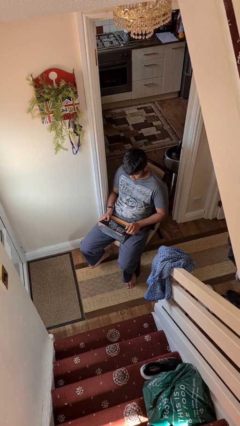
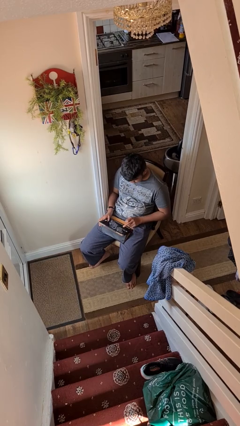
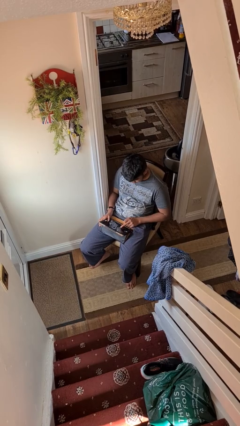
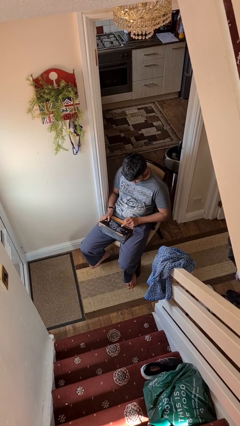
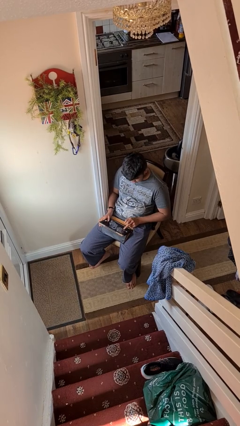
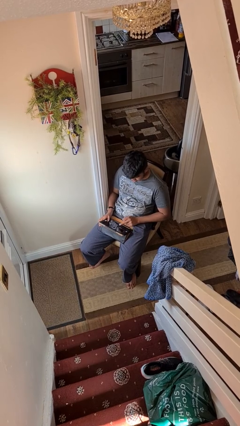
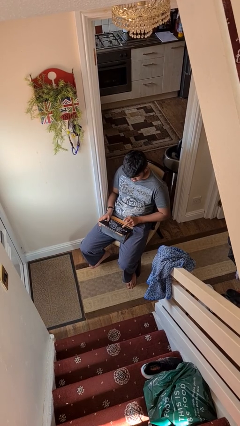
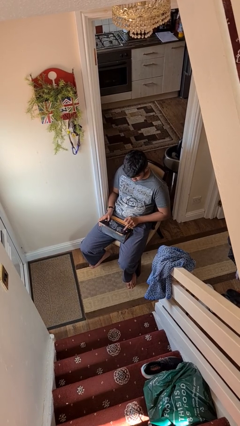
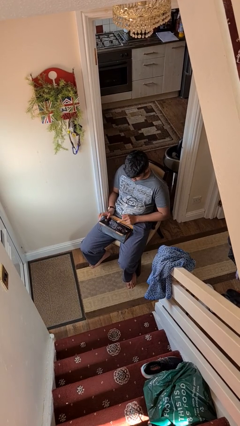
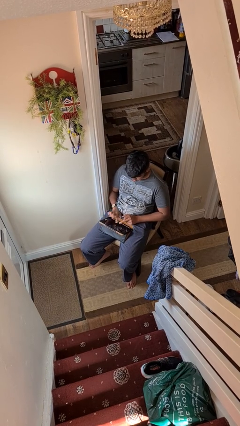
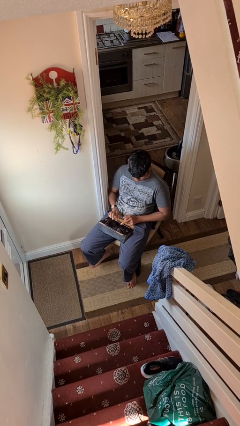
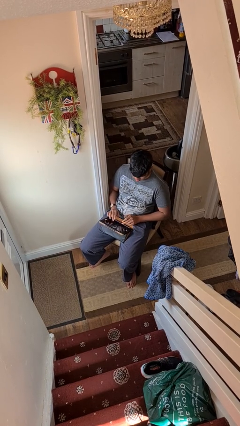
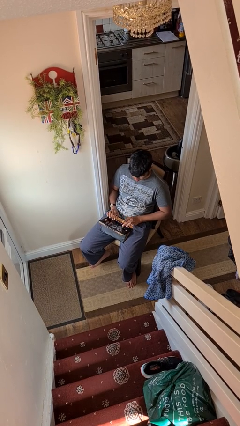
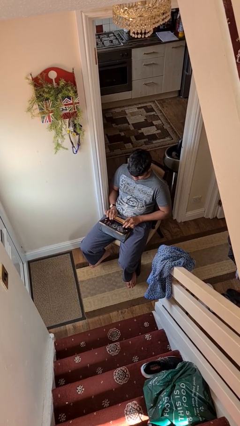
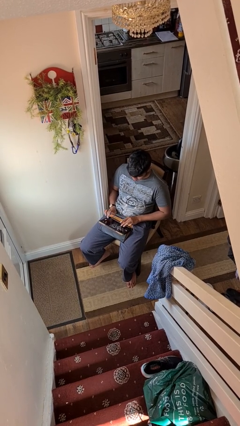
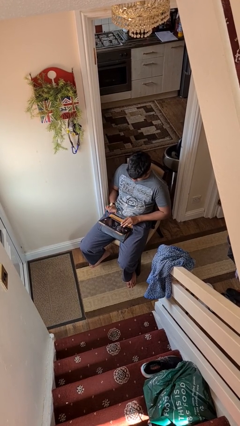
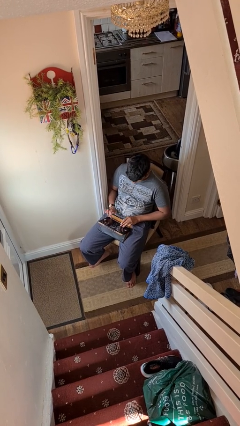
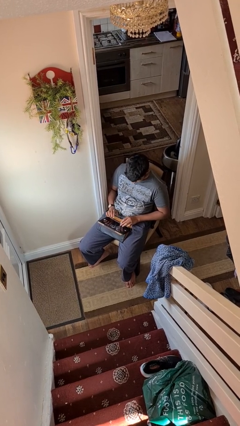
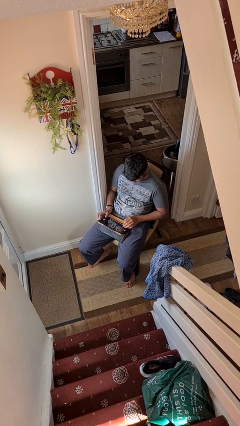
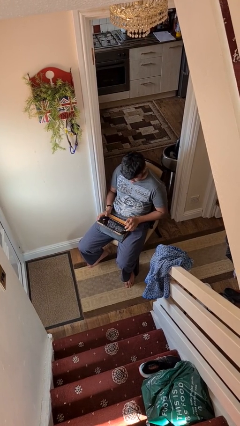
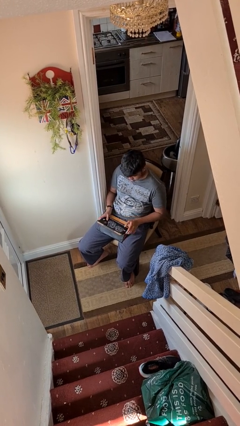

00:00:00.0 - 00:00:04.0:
person interacts with tablet

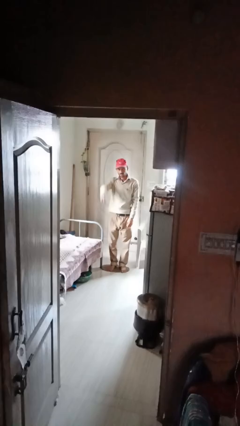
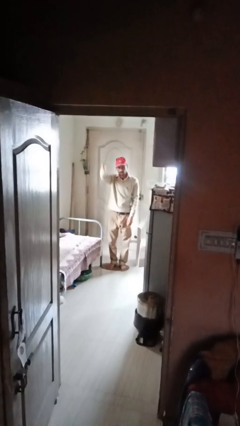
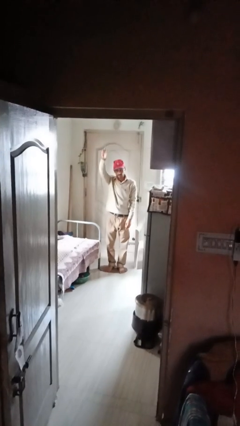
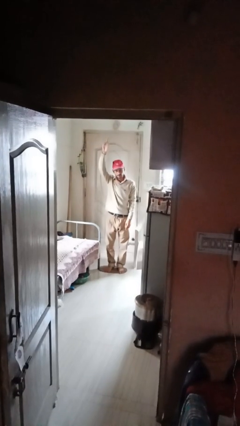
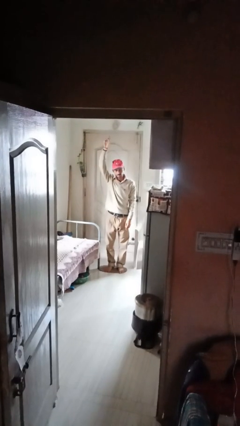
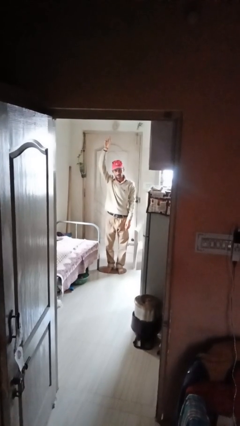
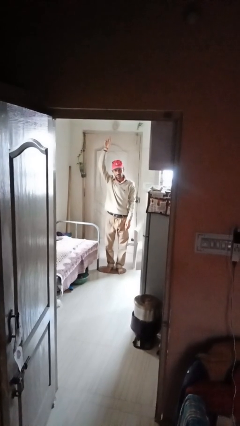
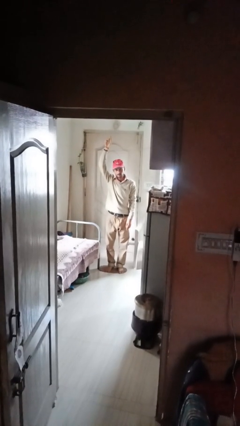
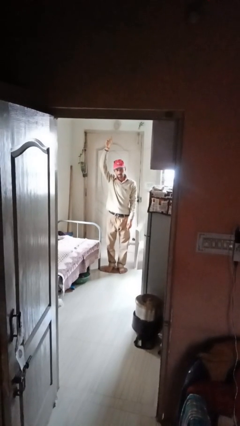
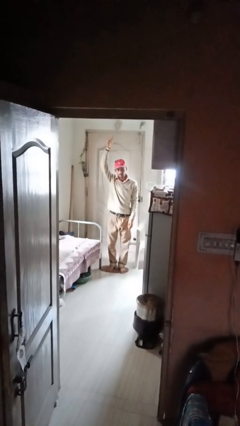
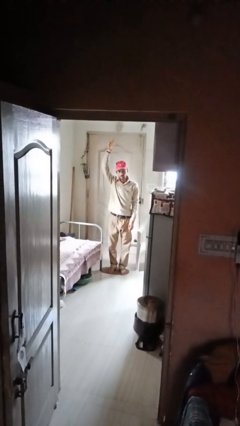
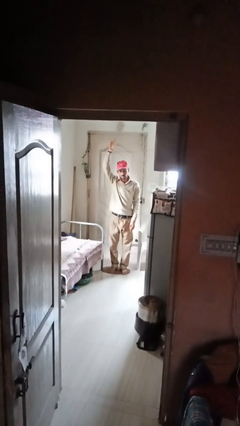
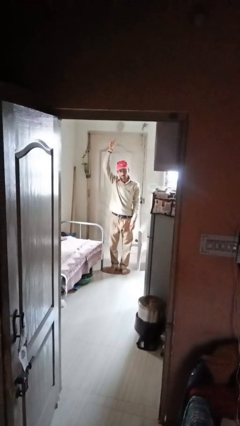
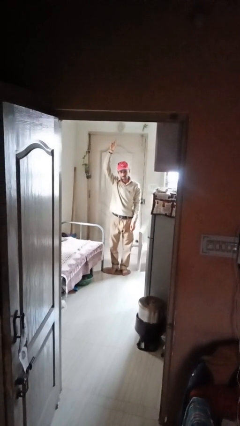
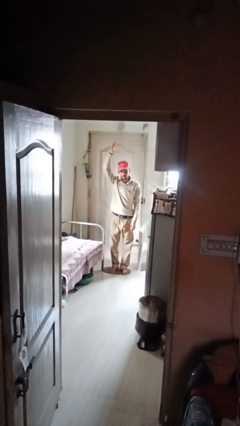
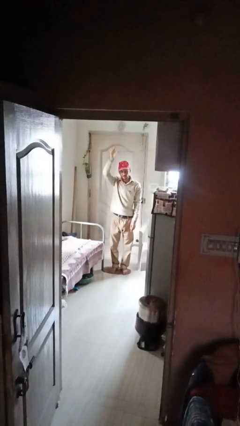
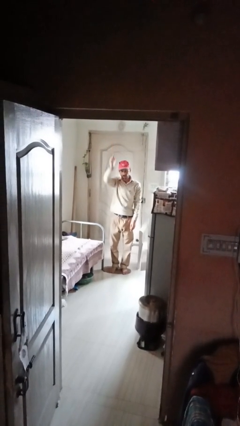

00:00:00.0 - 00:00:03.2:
person gestures swipe up

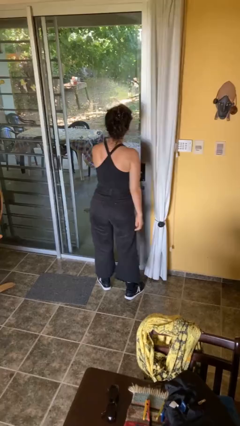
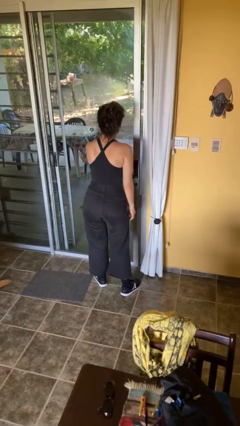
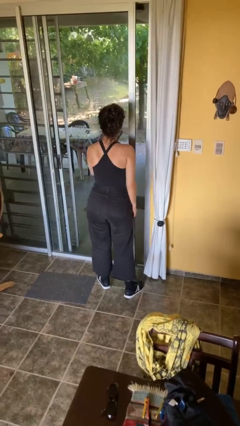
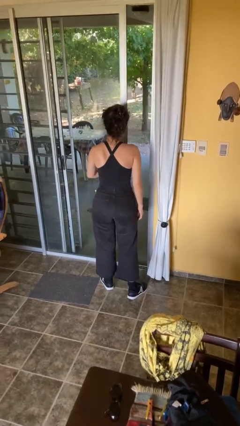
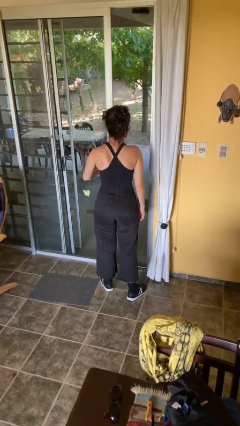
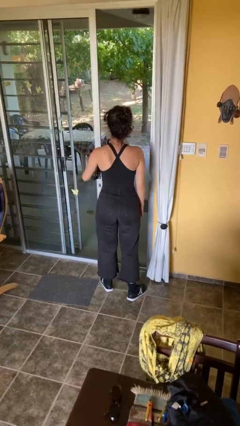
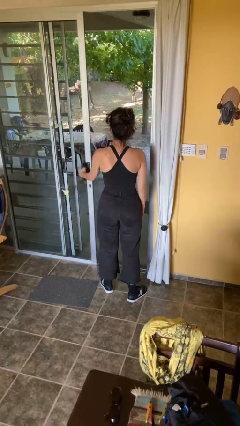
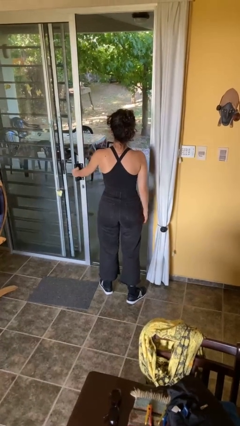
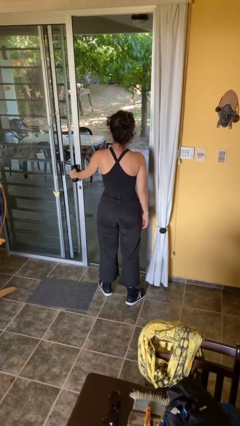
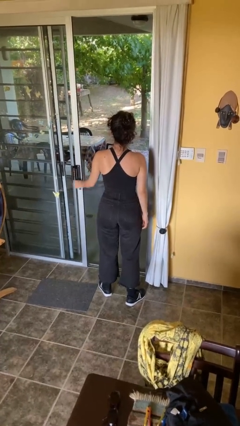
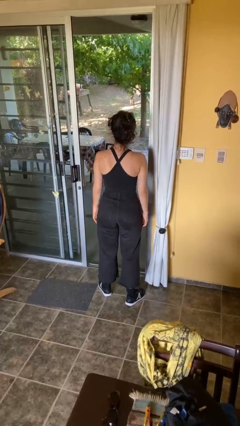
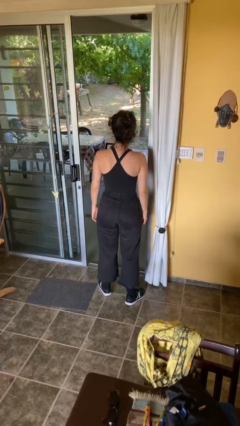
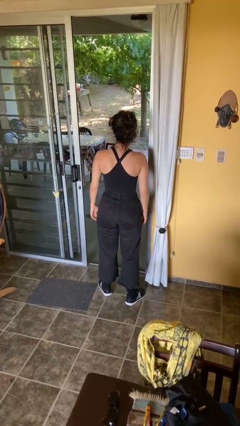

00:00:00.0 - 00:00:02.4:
person opens facility door

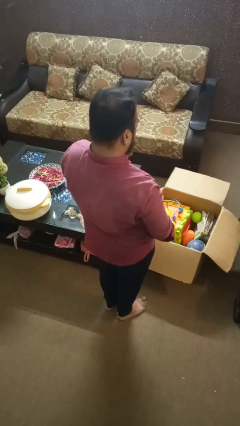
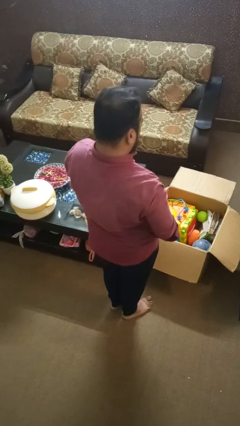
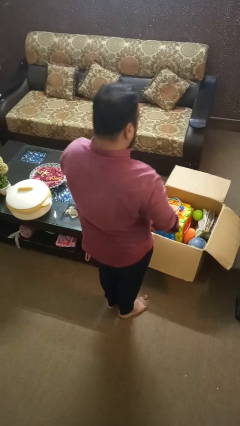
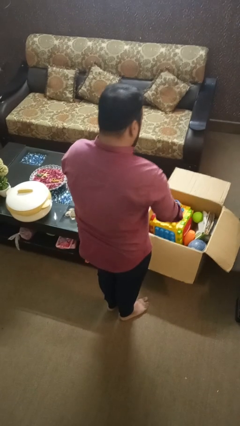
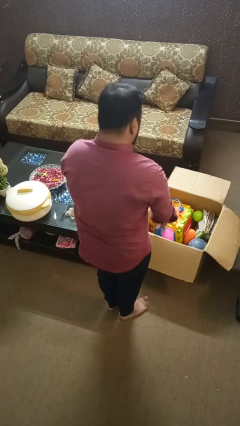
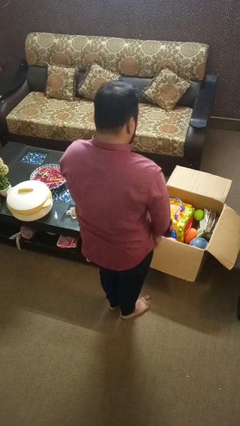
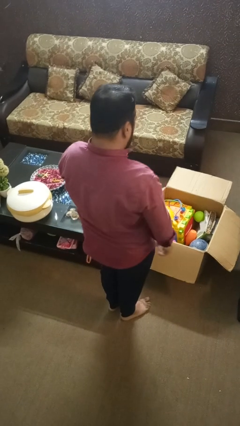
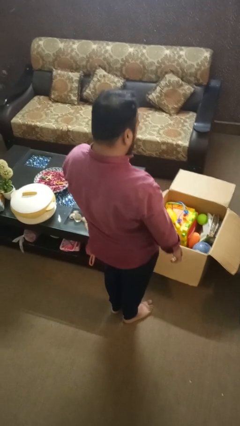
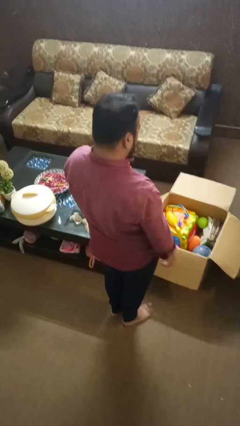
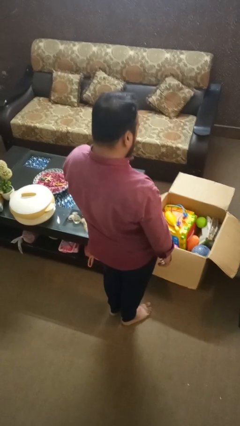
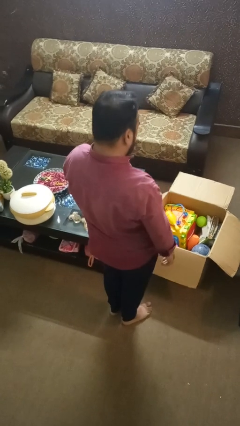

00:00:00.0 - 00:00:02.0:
person puts object into box

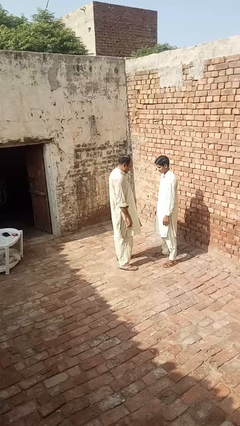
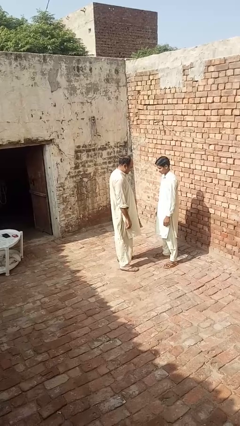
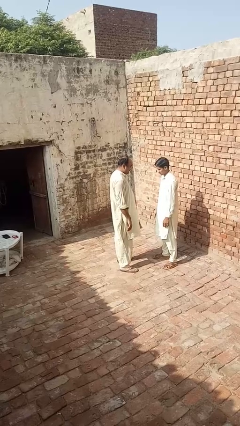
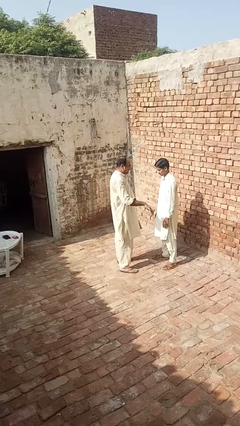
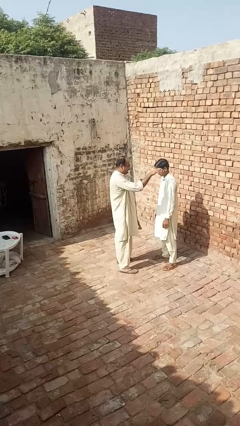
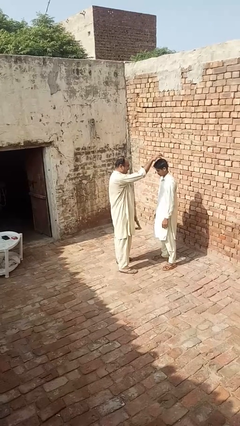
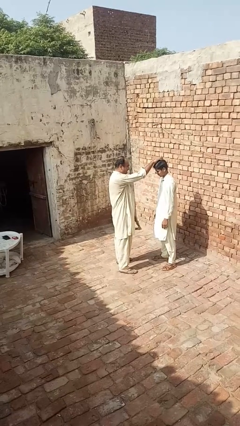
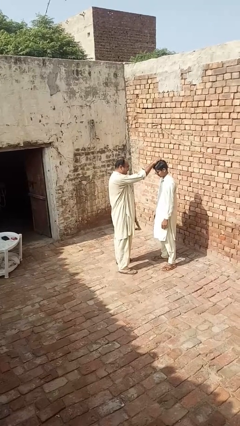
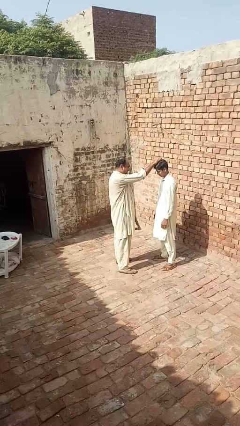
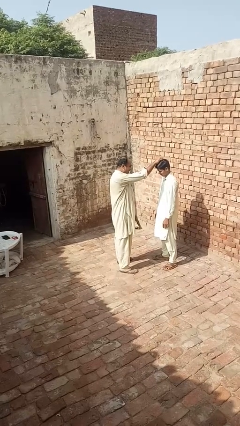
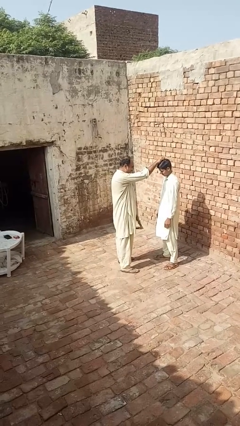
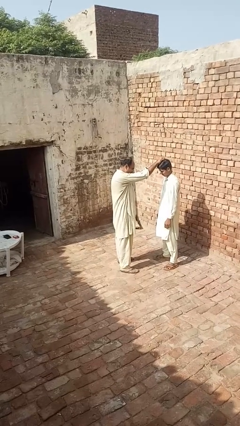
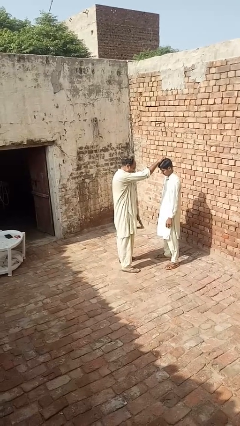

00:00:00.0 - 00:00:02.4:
person grabs person by hair

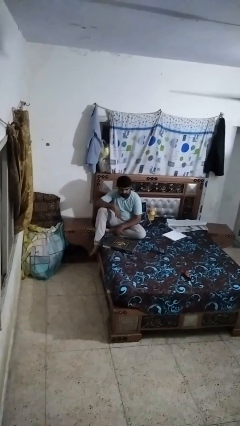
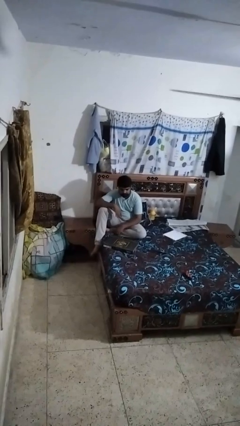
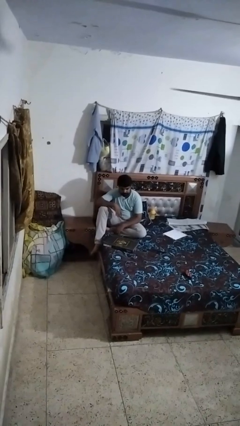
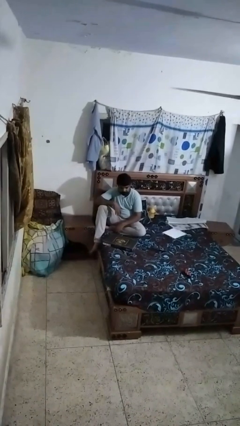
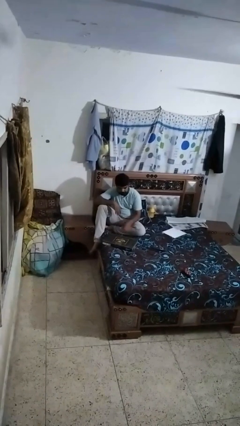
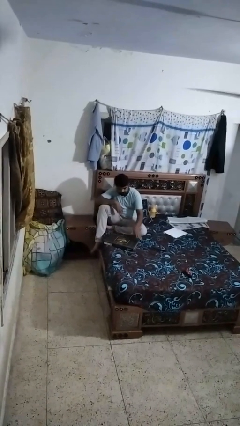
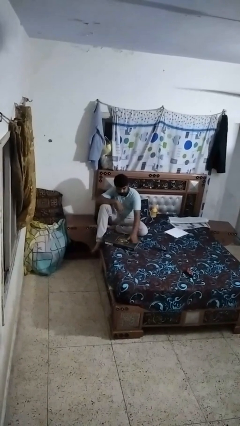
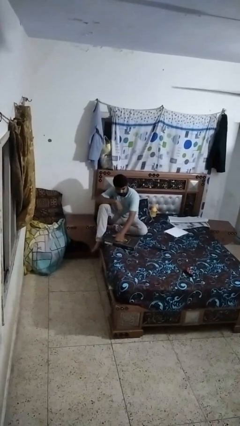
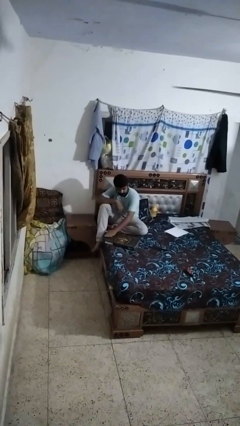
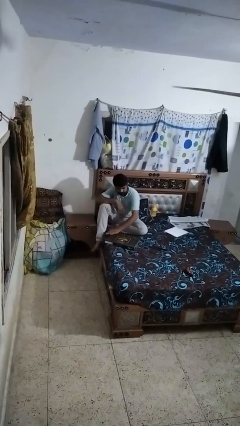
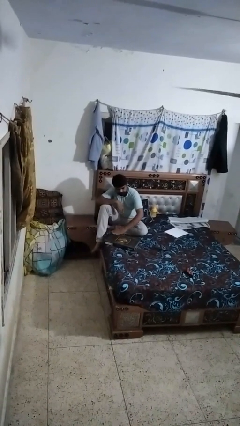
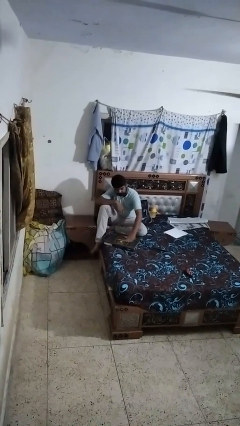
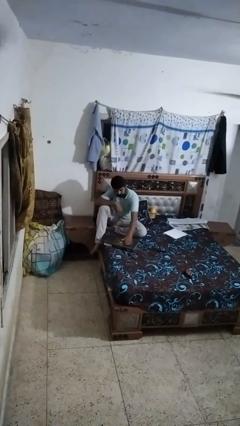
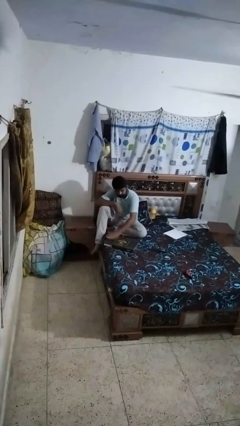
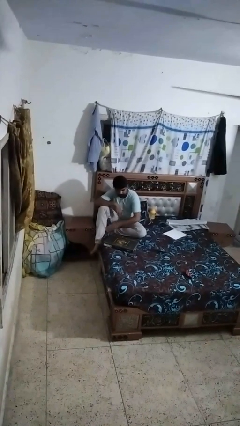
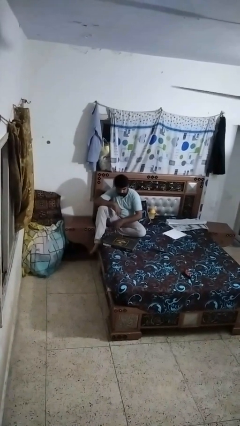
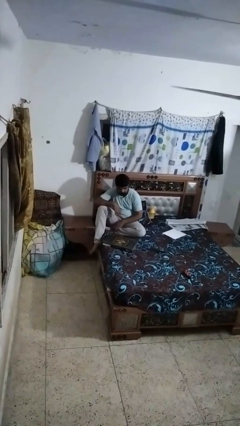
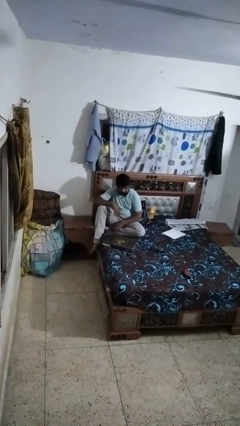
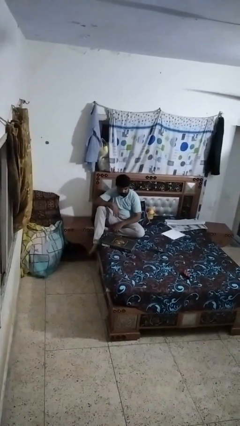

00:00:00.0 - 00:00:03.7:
person waves hand over object
